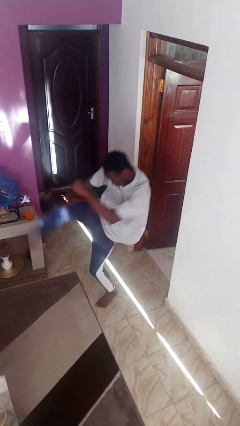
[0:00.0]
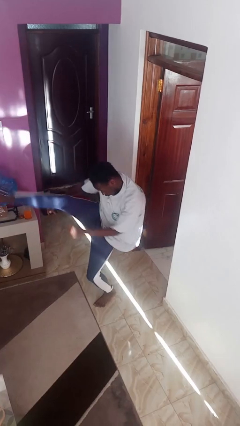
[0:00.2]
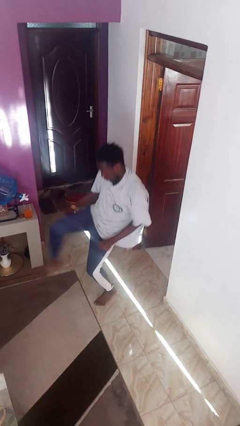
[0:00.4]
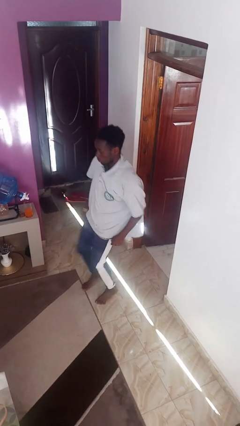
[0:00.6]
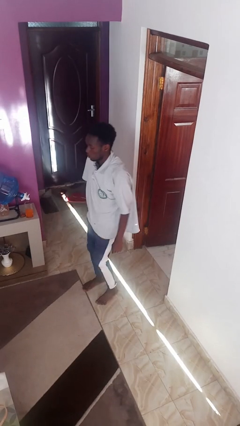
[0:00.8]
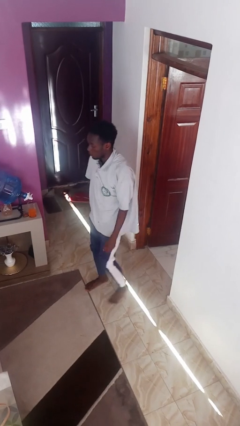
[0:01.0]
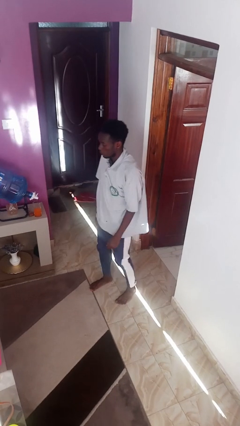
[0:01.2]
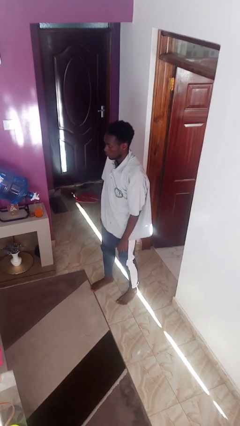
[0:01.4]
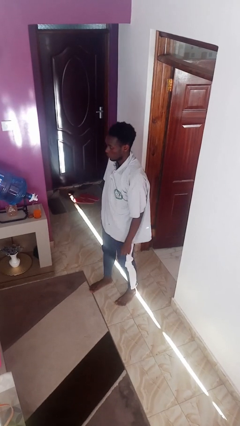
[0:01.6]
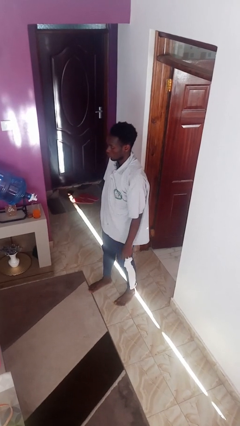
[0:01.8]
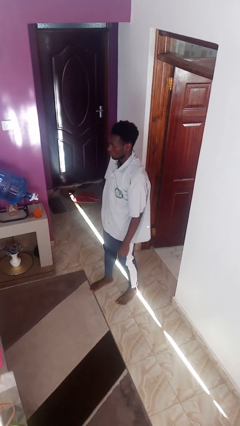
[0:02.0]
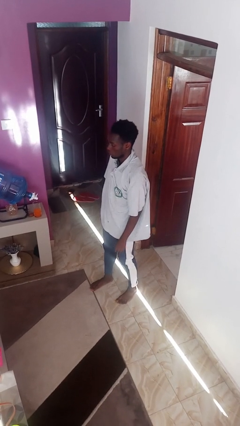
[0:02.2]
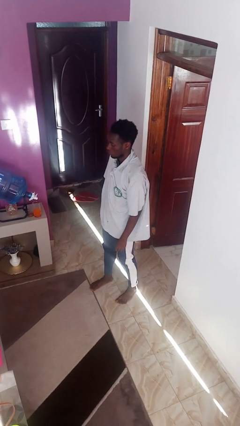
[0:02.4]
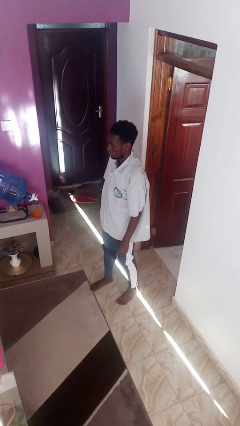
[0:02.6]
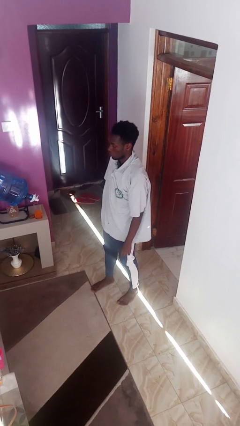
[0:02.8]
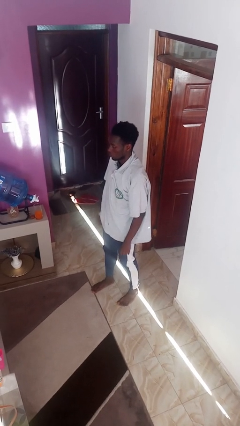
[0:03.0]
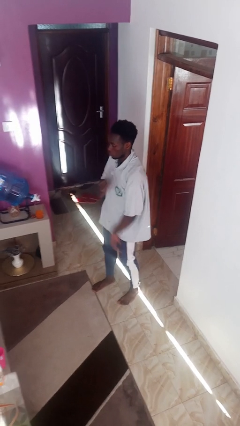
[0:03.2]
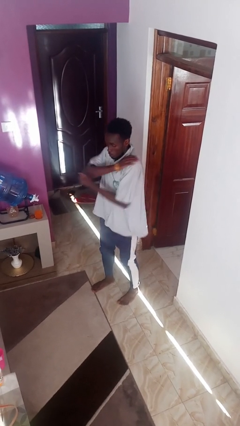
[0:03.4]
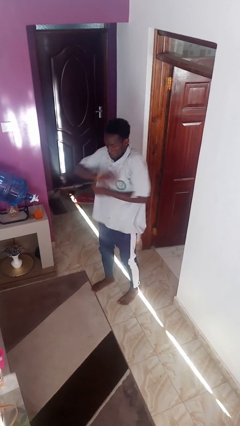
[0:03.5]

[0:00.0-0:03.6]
person karate kicks

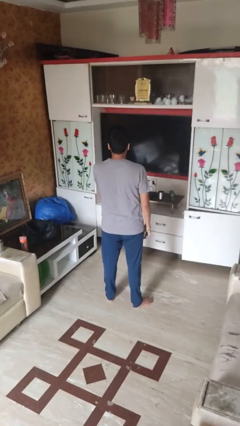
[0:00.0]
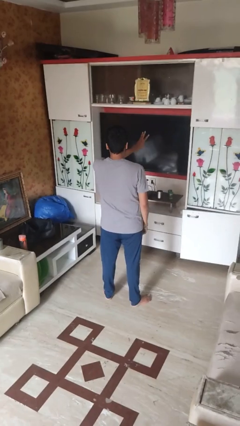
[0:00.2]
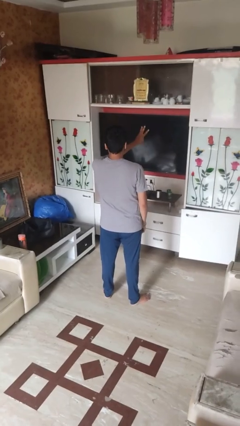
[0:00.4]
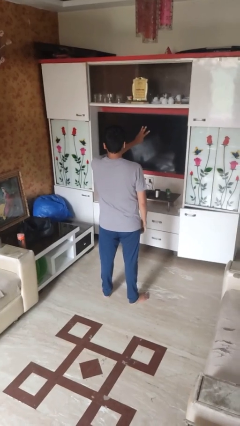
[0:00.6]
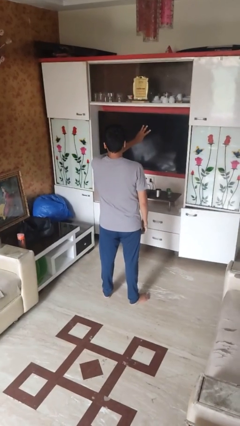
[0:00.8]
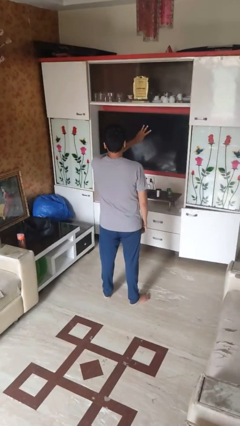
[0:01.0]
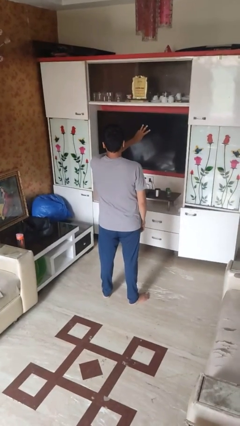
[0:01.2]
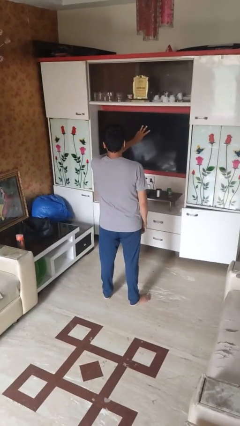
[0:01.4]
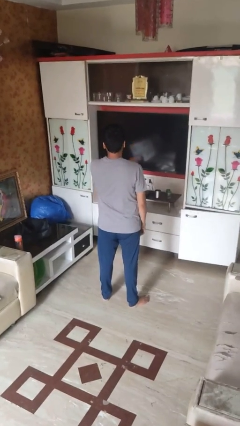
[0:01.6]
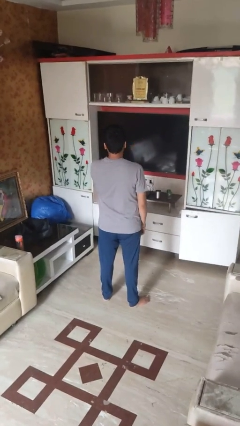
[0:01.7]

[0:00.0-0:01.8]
person gestures number three

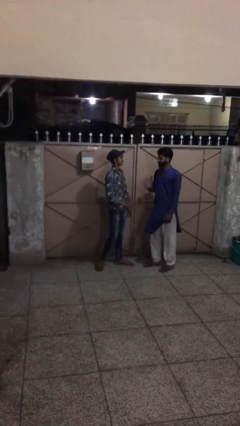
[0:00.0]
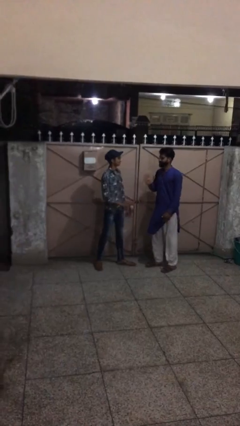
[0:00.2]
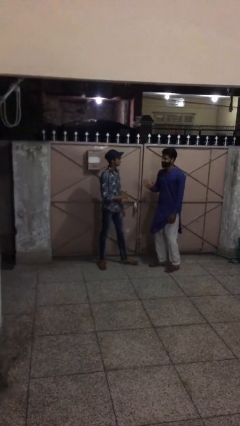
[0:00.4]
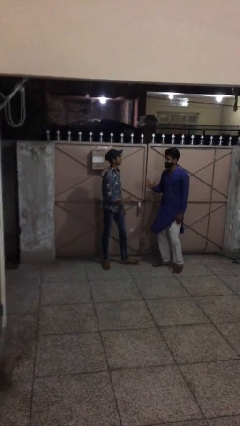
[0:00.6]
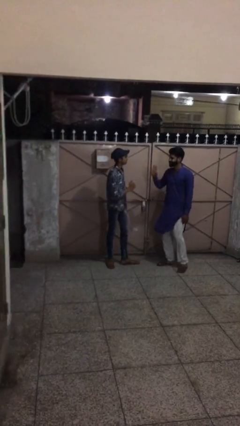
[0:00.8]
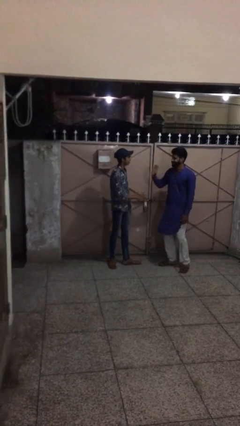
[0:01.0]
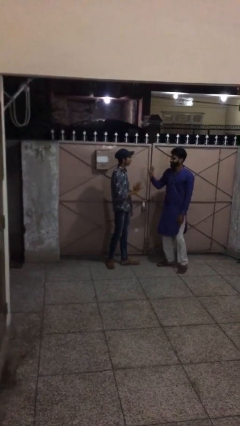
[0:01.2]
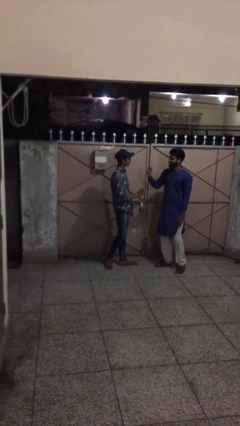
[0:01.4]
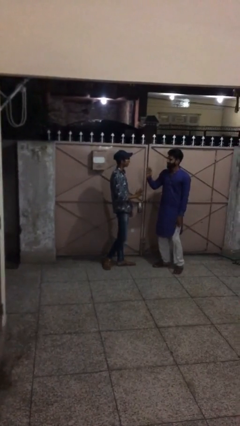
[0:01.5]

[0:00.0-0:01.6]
person talks to person

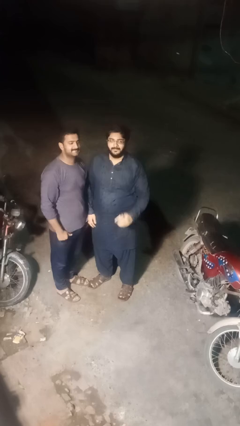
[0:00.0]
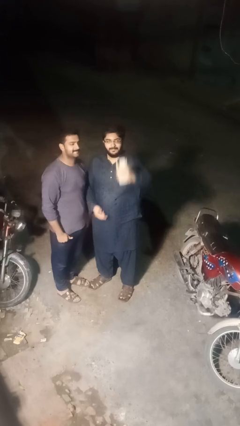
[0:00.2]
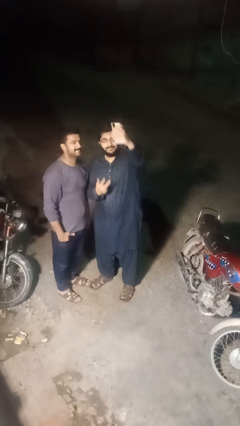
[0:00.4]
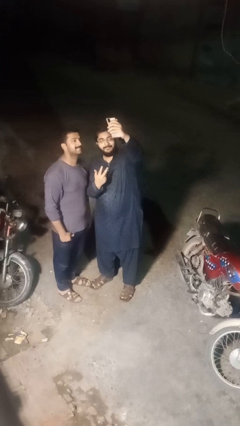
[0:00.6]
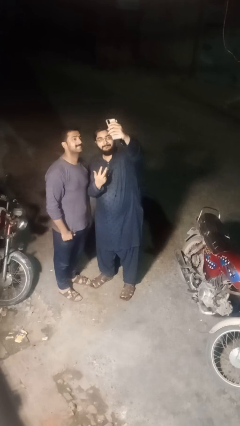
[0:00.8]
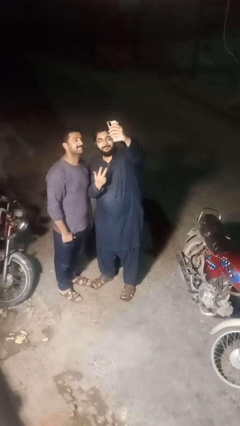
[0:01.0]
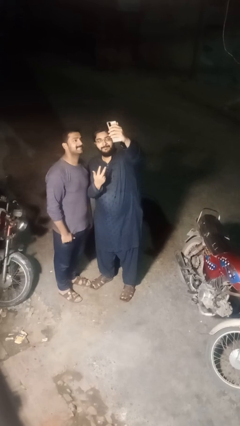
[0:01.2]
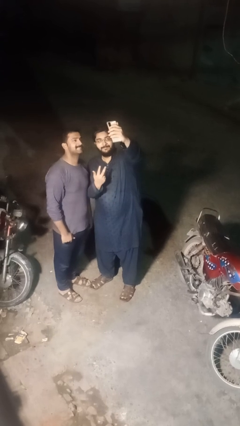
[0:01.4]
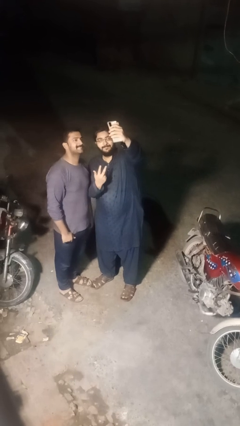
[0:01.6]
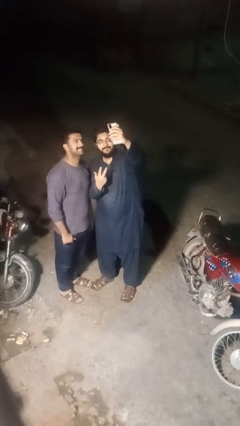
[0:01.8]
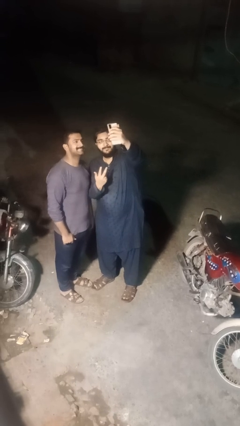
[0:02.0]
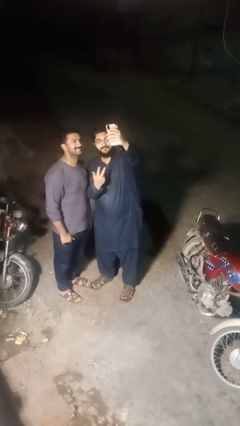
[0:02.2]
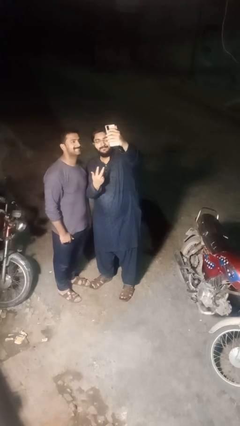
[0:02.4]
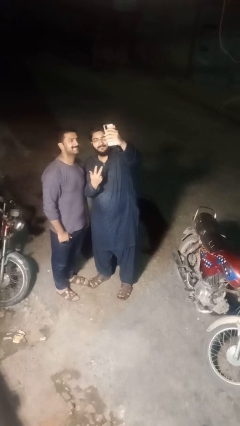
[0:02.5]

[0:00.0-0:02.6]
person takes selfie with person

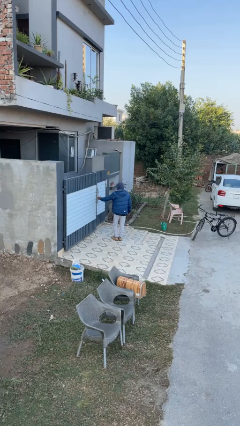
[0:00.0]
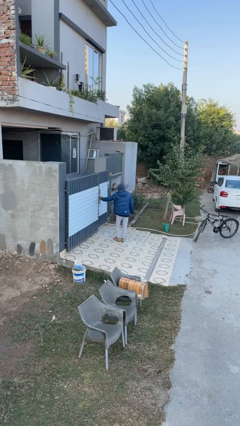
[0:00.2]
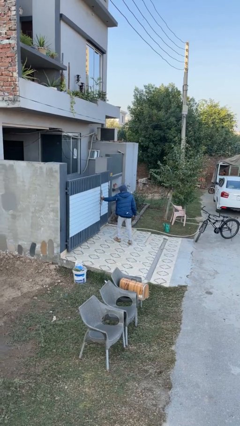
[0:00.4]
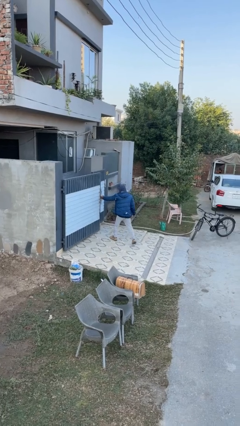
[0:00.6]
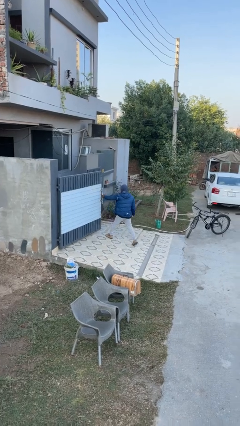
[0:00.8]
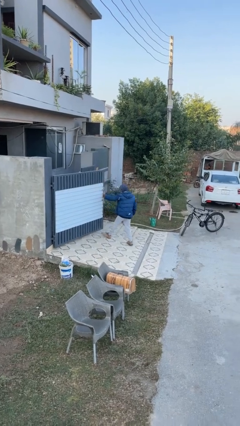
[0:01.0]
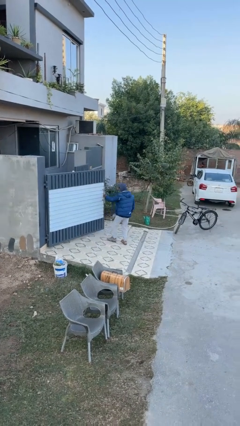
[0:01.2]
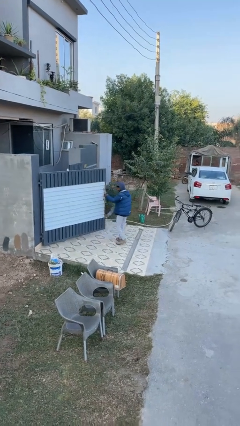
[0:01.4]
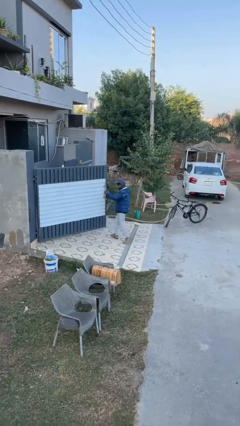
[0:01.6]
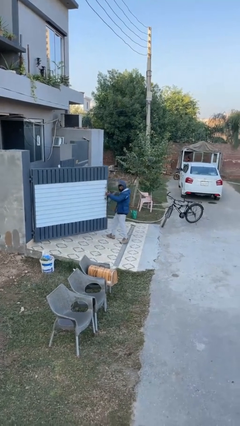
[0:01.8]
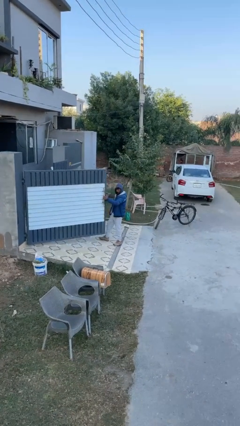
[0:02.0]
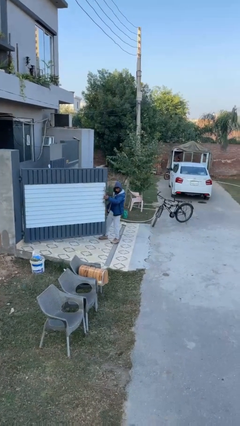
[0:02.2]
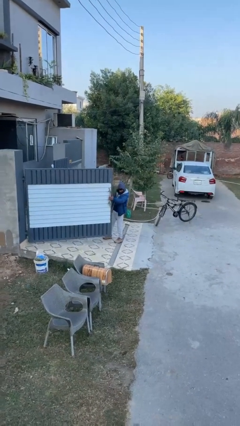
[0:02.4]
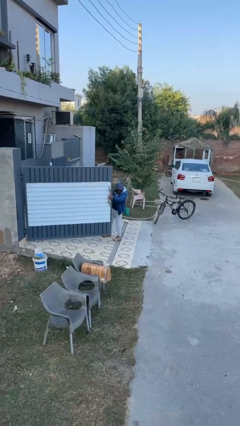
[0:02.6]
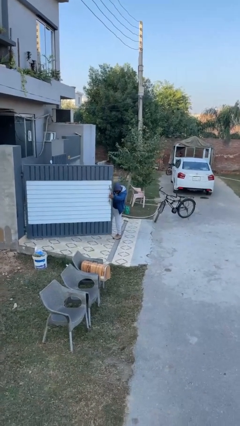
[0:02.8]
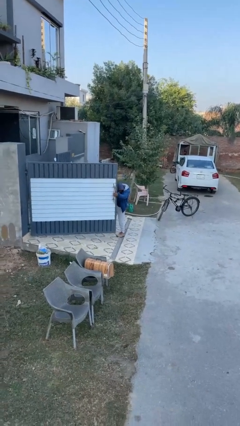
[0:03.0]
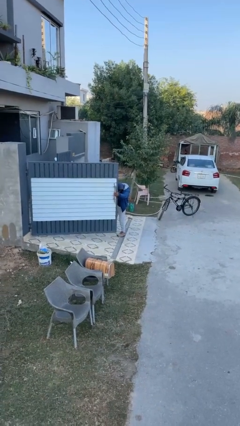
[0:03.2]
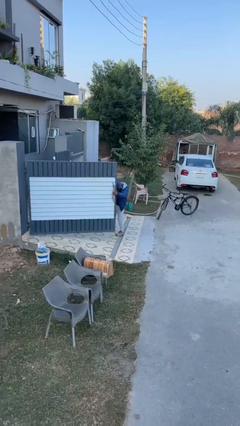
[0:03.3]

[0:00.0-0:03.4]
person opens facility door

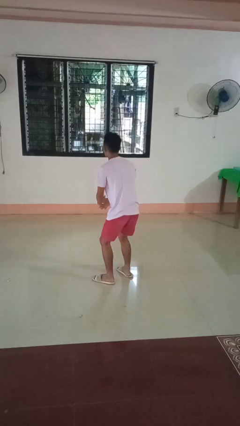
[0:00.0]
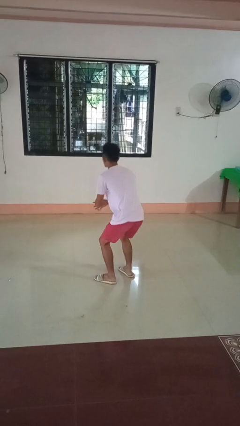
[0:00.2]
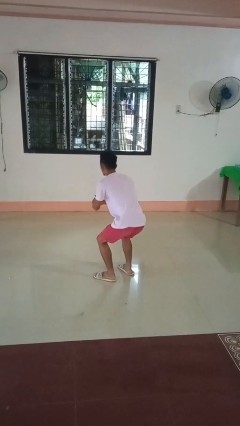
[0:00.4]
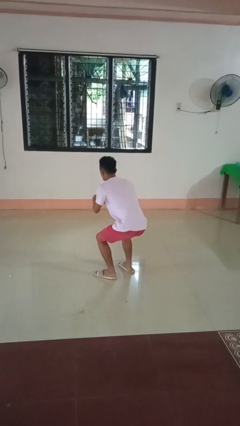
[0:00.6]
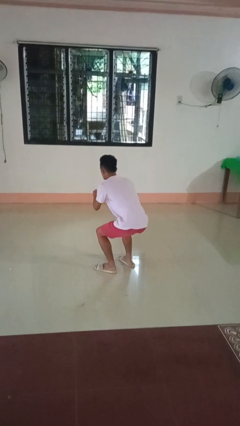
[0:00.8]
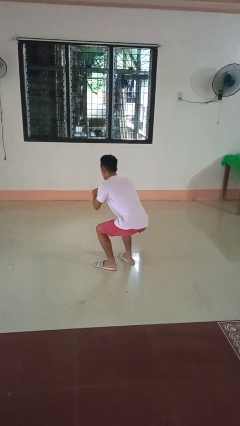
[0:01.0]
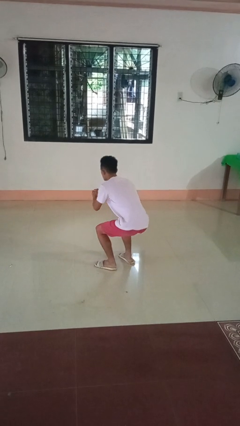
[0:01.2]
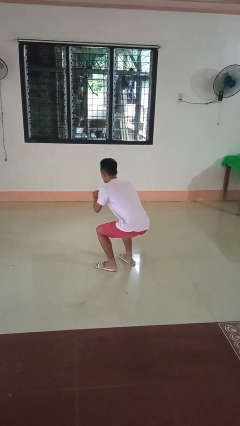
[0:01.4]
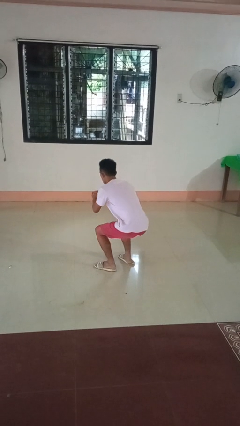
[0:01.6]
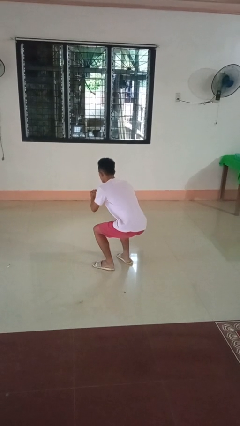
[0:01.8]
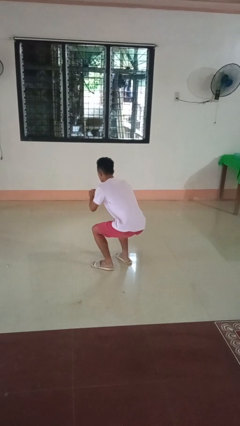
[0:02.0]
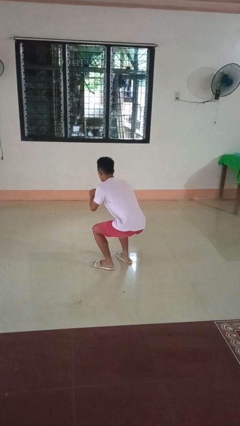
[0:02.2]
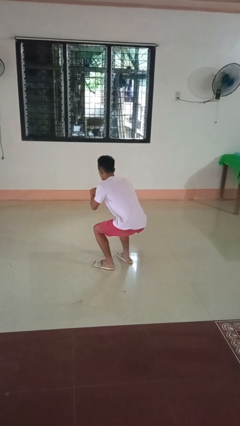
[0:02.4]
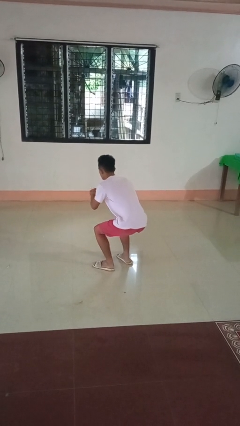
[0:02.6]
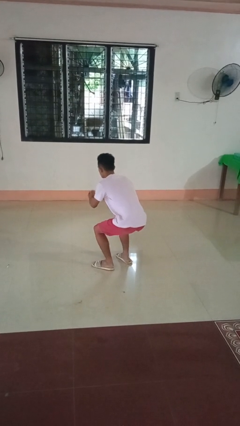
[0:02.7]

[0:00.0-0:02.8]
person squats

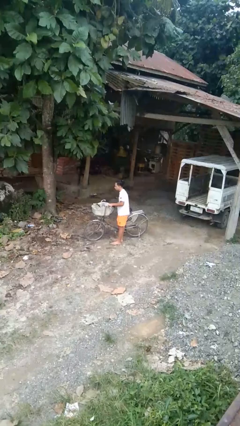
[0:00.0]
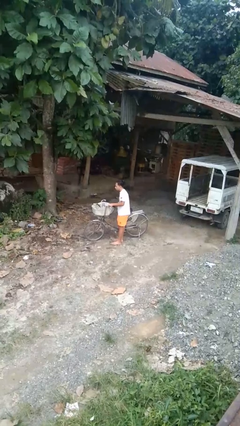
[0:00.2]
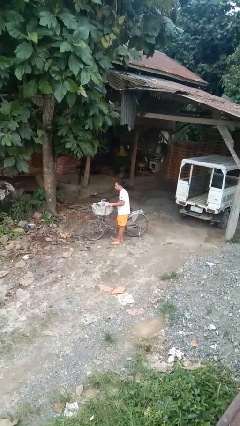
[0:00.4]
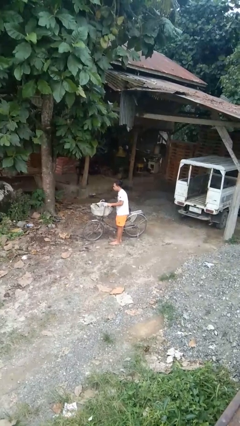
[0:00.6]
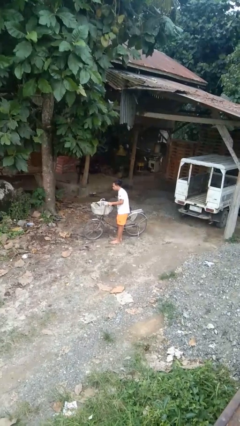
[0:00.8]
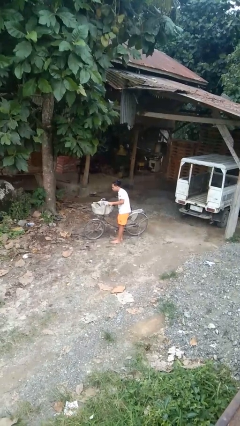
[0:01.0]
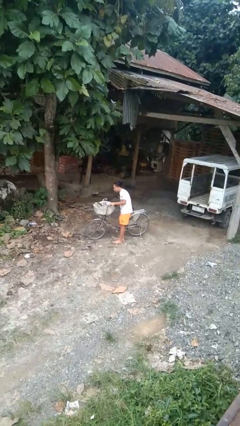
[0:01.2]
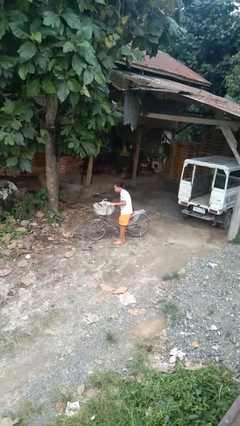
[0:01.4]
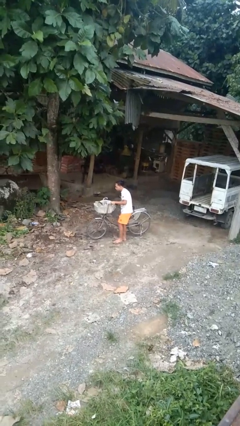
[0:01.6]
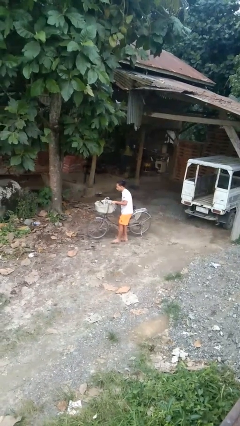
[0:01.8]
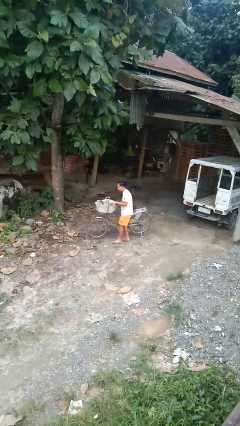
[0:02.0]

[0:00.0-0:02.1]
person carries bicycle
